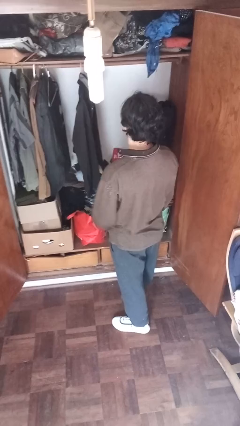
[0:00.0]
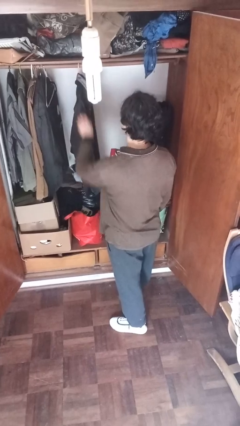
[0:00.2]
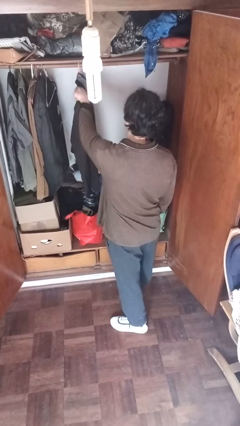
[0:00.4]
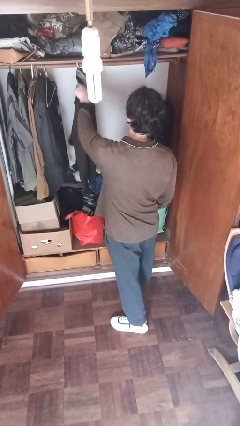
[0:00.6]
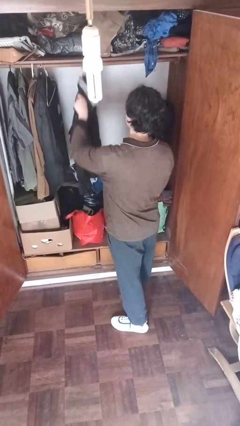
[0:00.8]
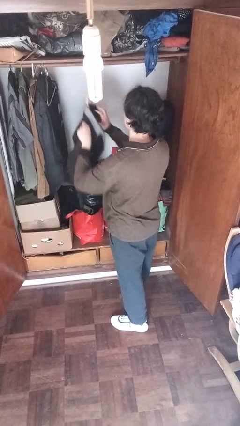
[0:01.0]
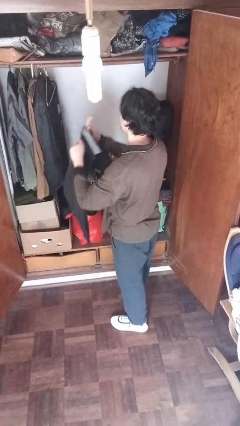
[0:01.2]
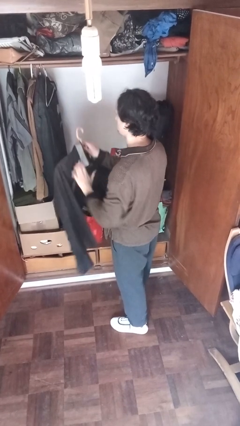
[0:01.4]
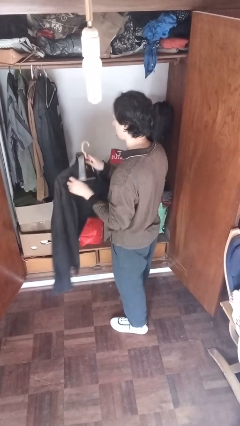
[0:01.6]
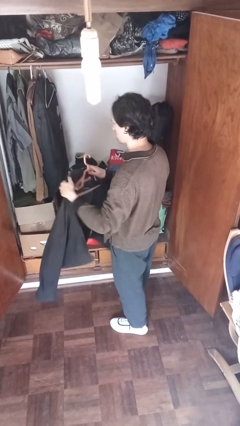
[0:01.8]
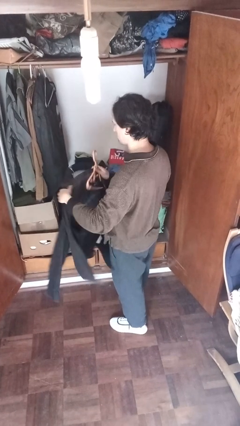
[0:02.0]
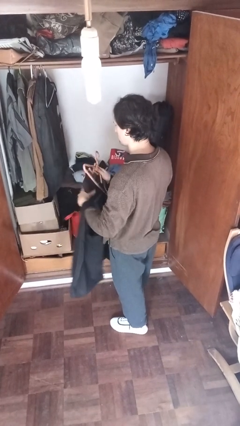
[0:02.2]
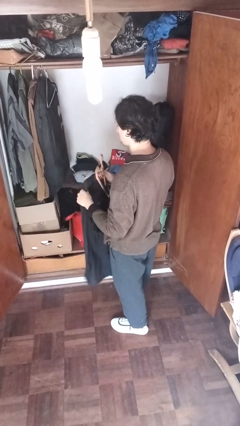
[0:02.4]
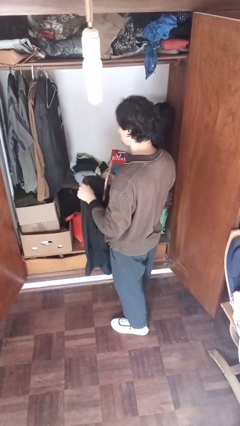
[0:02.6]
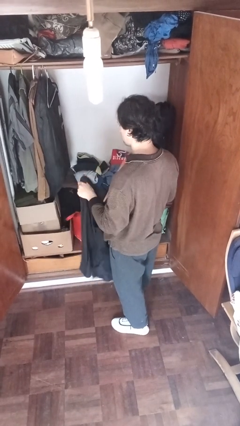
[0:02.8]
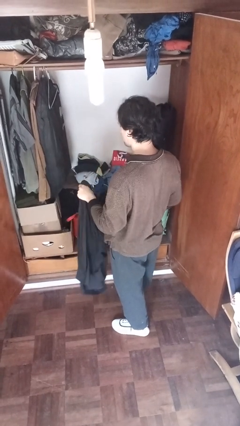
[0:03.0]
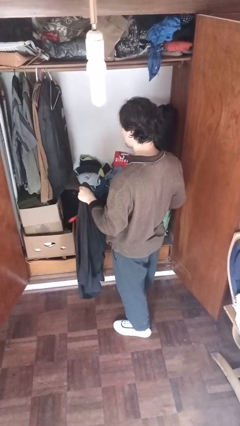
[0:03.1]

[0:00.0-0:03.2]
person takes clothes from closet

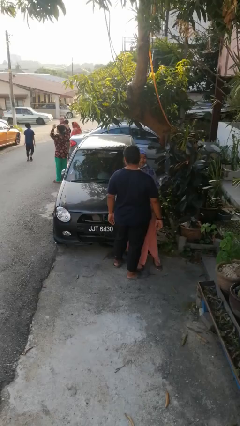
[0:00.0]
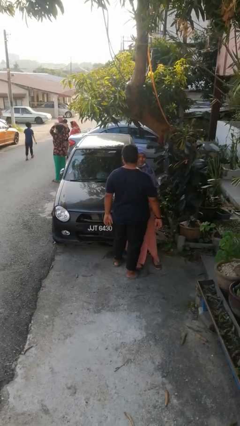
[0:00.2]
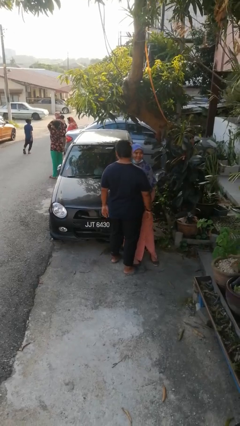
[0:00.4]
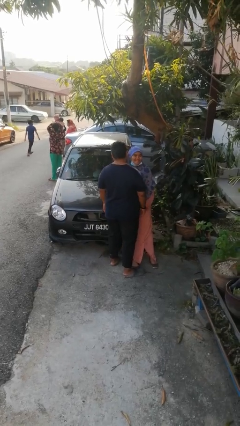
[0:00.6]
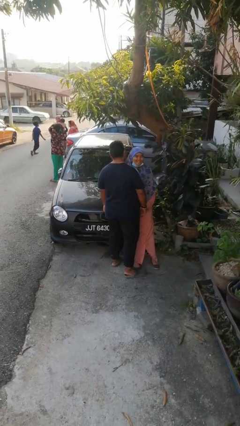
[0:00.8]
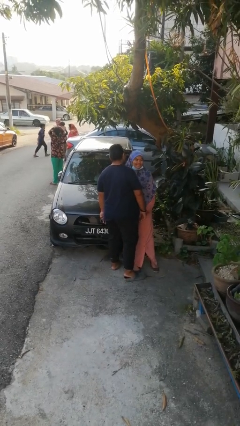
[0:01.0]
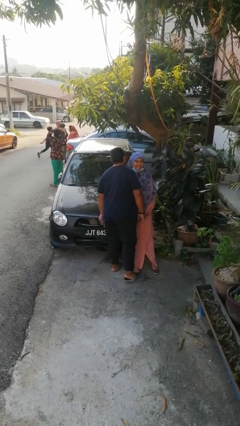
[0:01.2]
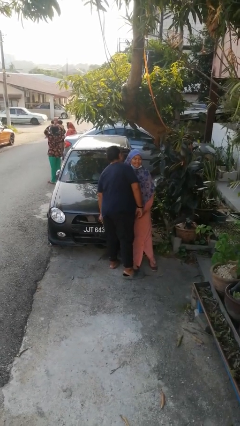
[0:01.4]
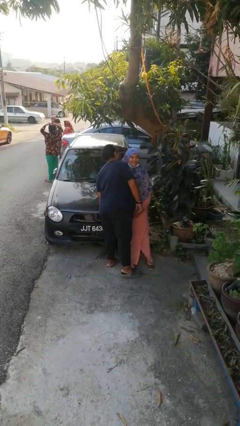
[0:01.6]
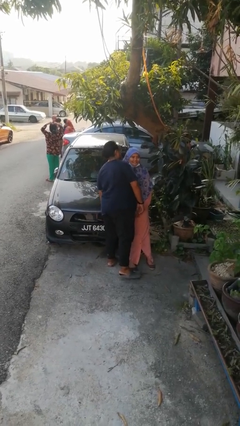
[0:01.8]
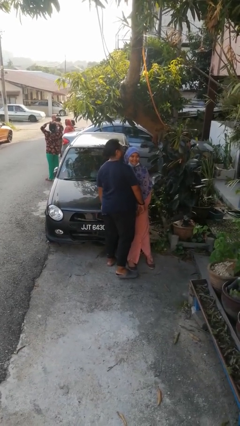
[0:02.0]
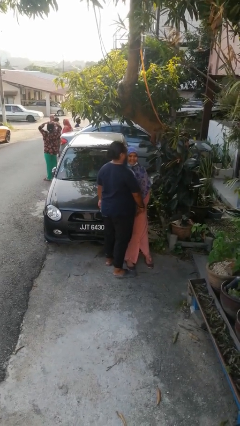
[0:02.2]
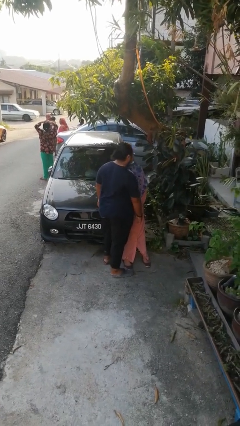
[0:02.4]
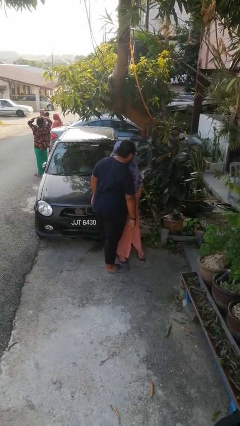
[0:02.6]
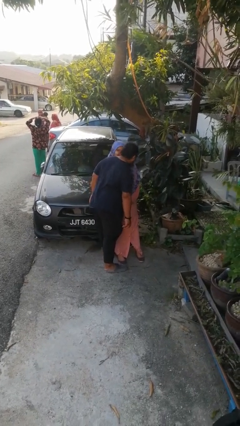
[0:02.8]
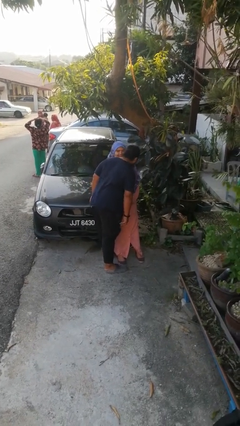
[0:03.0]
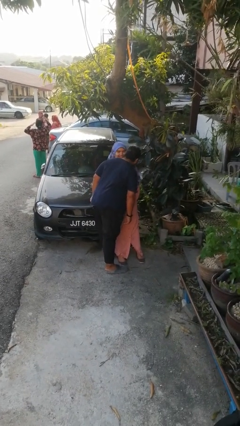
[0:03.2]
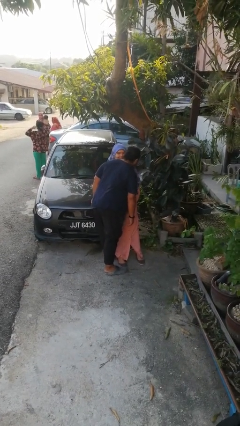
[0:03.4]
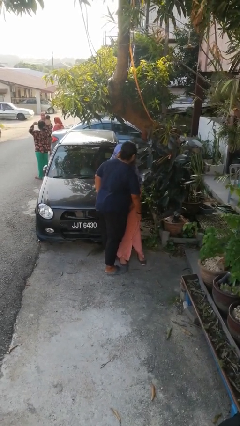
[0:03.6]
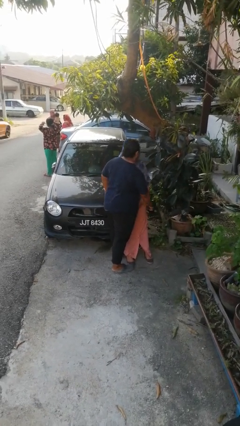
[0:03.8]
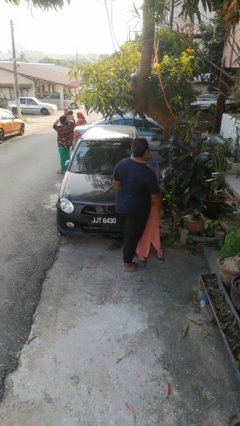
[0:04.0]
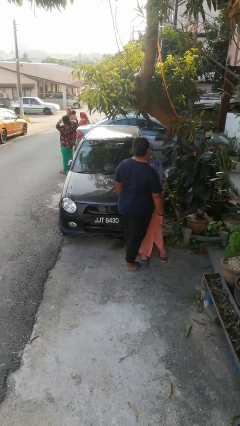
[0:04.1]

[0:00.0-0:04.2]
person kisses cheek of person

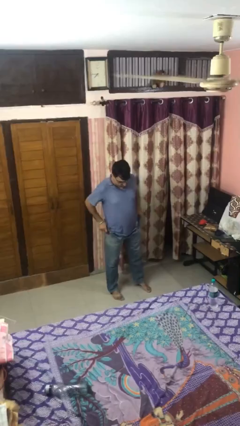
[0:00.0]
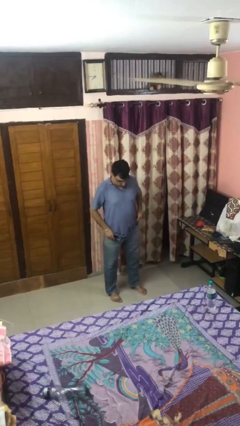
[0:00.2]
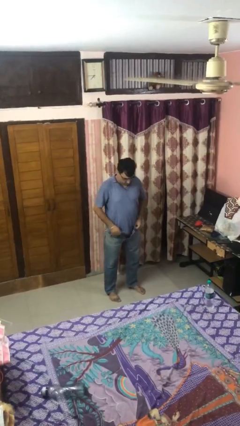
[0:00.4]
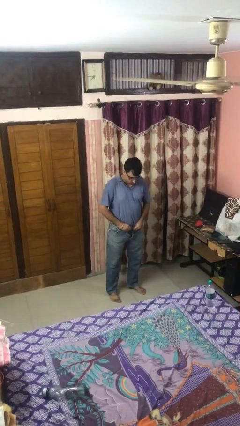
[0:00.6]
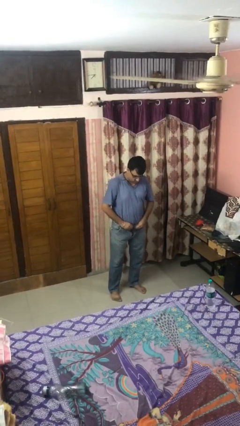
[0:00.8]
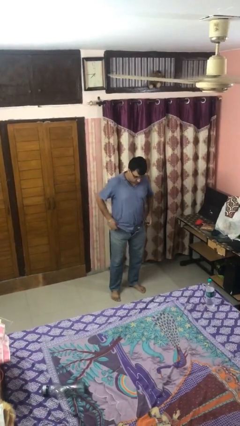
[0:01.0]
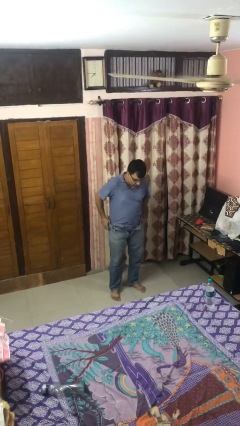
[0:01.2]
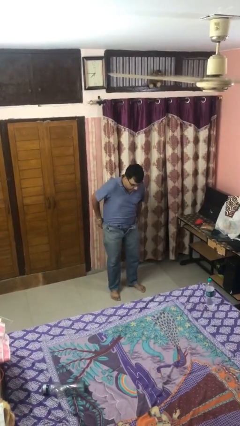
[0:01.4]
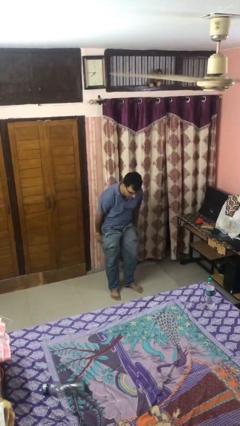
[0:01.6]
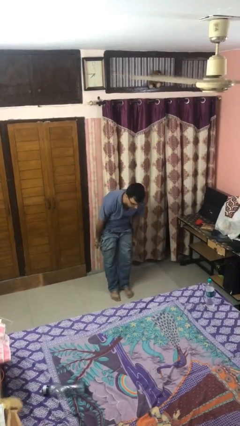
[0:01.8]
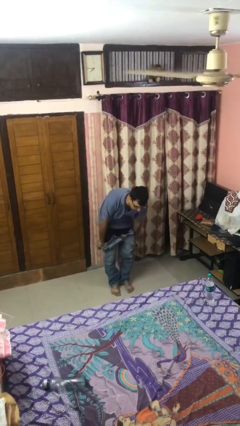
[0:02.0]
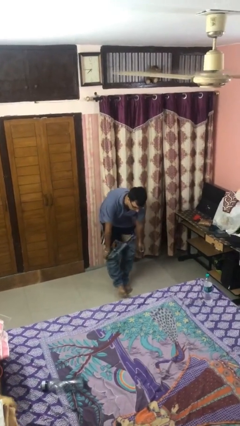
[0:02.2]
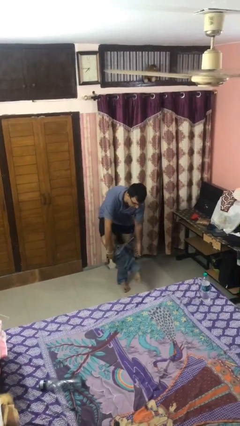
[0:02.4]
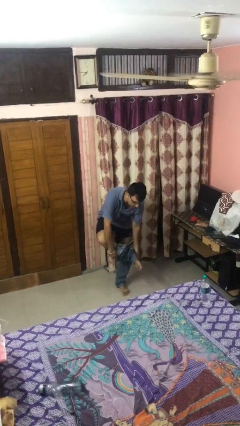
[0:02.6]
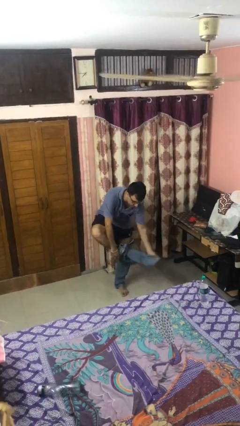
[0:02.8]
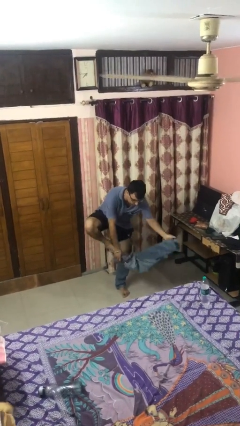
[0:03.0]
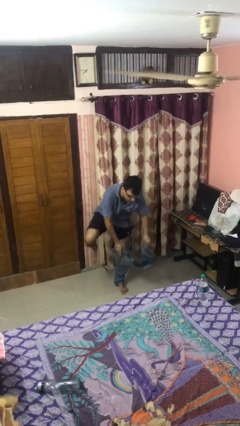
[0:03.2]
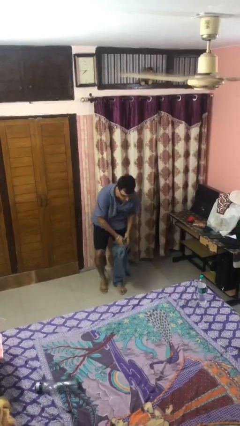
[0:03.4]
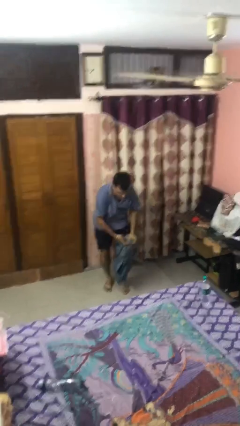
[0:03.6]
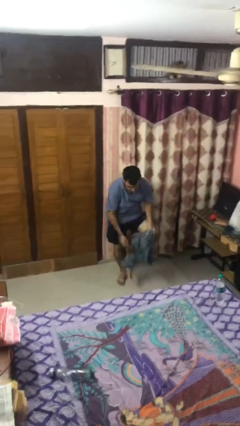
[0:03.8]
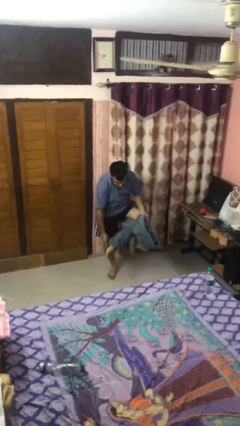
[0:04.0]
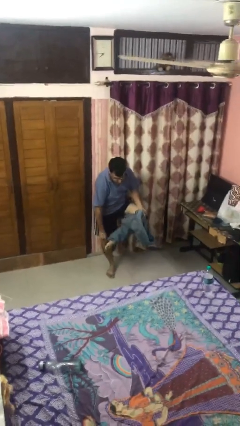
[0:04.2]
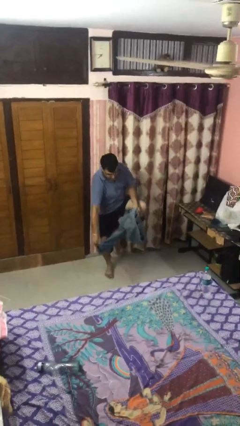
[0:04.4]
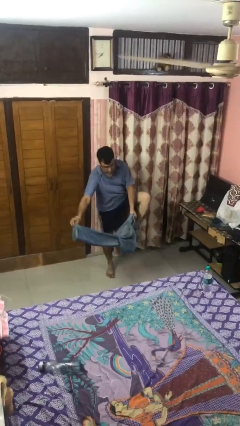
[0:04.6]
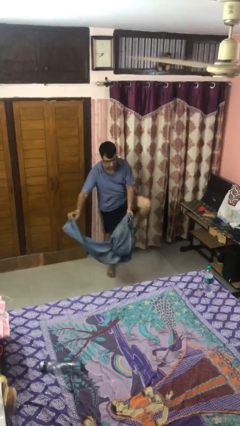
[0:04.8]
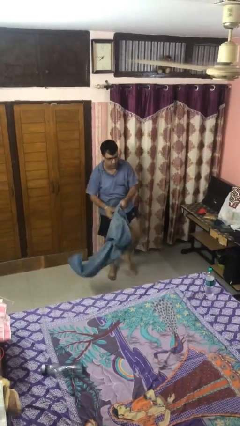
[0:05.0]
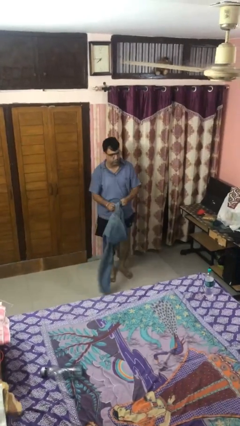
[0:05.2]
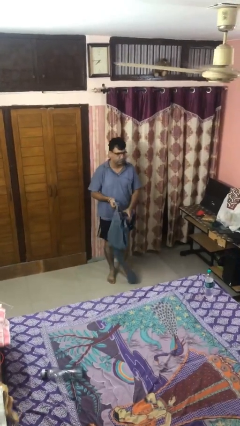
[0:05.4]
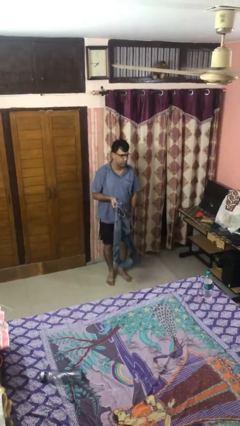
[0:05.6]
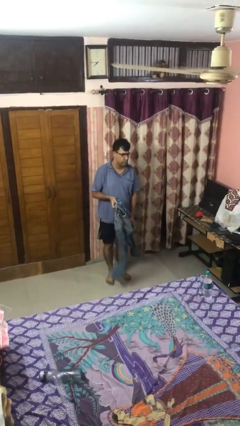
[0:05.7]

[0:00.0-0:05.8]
person takes off pants

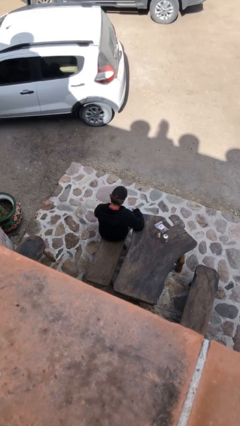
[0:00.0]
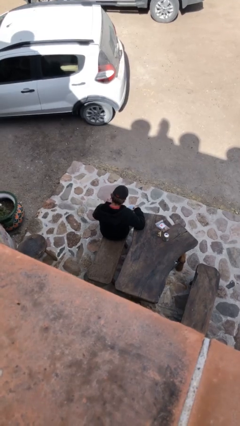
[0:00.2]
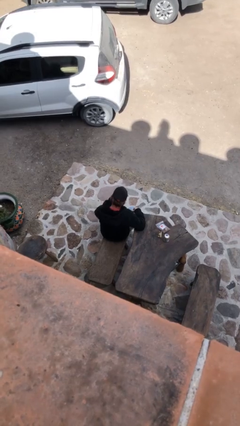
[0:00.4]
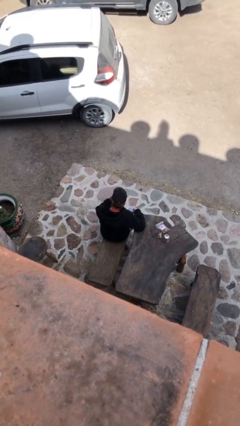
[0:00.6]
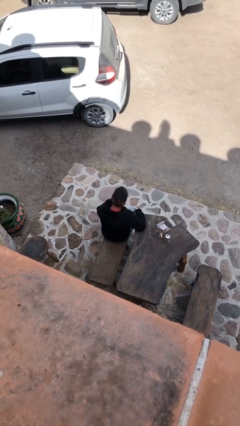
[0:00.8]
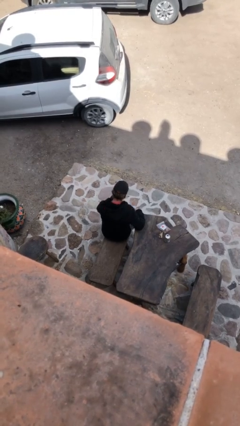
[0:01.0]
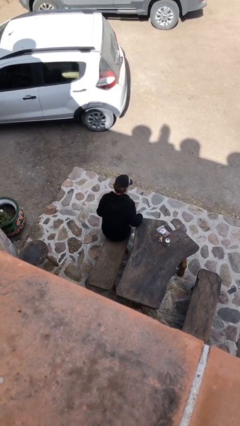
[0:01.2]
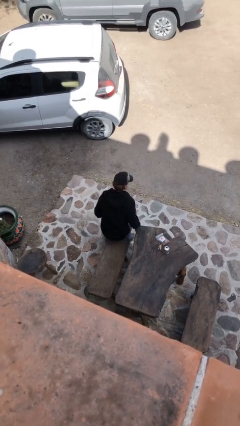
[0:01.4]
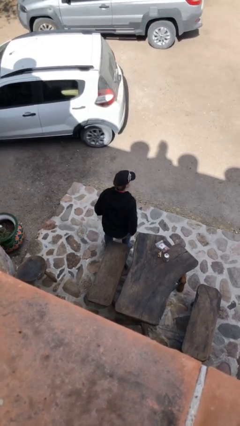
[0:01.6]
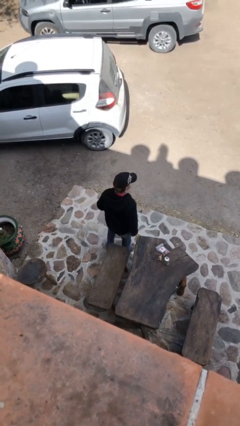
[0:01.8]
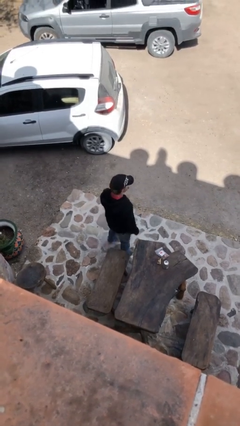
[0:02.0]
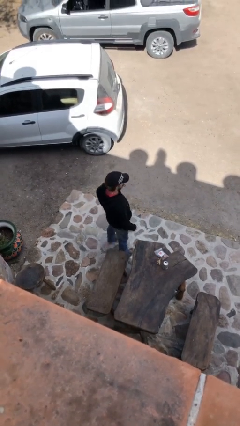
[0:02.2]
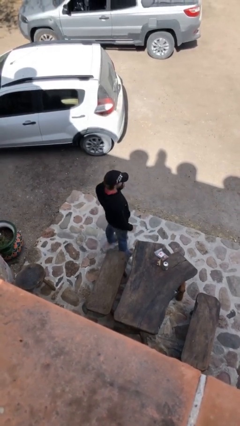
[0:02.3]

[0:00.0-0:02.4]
person stands up

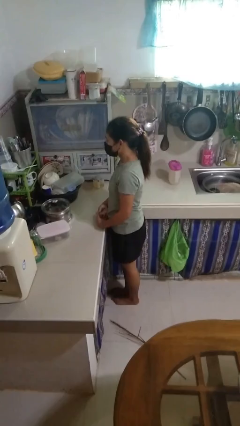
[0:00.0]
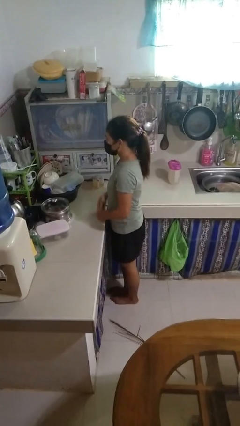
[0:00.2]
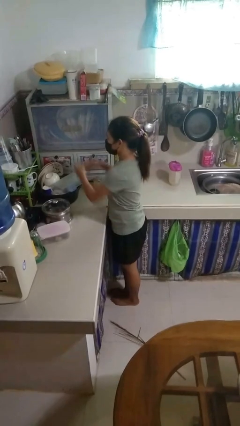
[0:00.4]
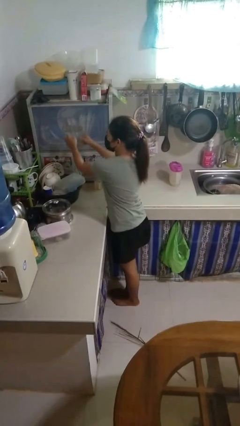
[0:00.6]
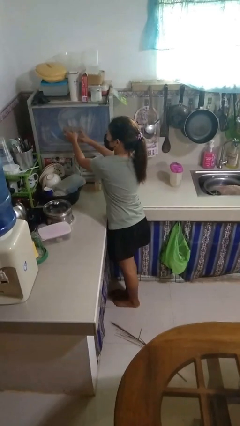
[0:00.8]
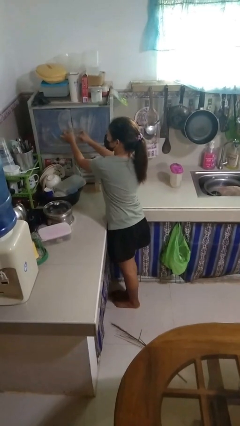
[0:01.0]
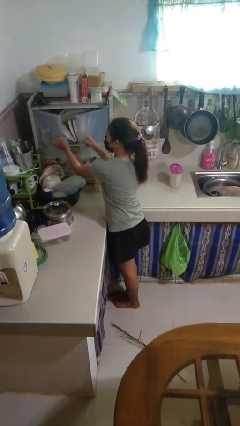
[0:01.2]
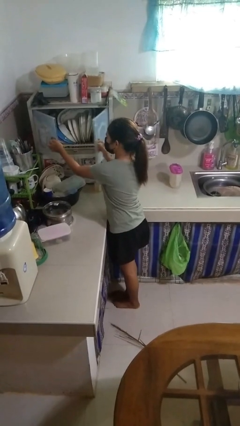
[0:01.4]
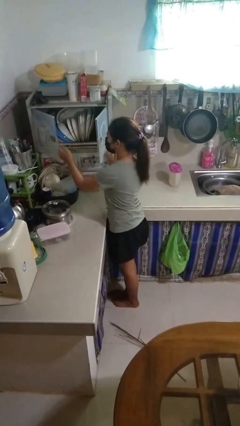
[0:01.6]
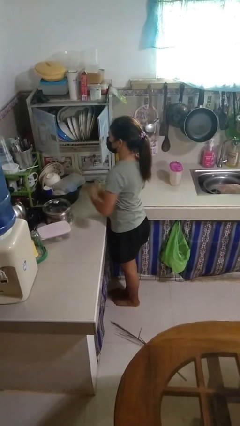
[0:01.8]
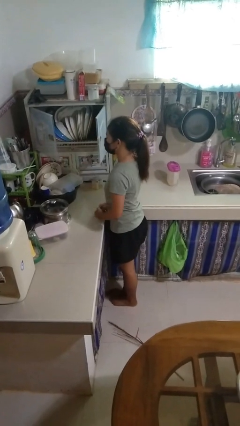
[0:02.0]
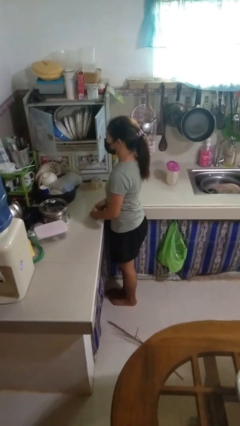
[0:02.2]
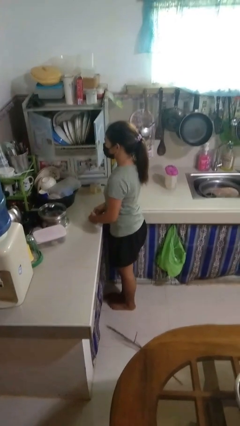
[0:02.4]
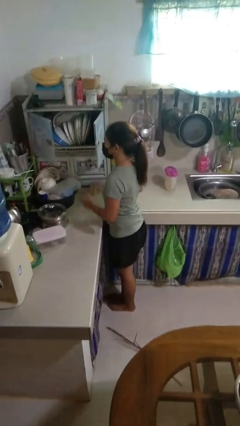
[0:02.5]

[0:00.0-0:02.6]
person opens kitchen drawer
